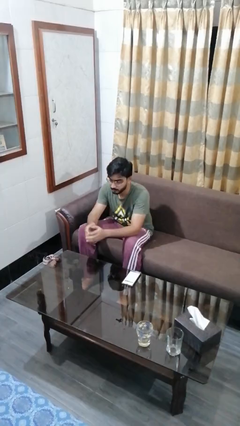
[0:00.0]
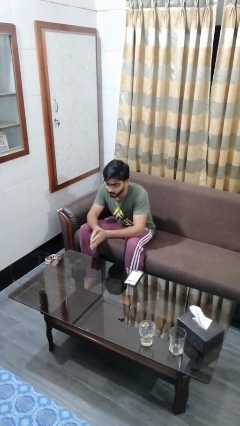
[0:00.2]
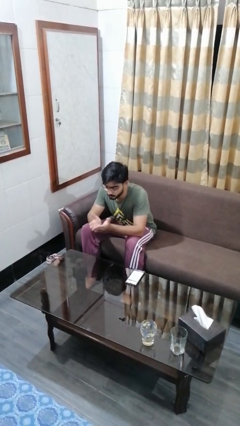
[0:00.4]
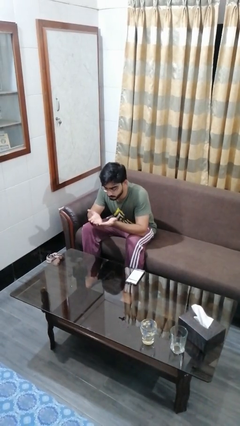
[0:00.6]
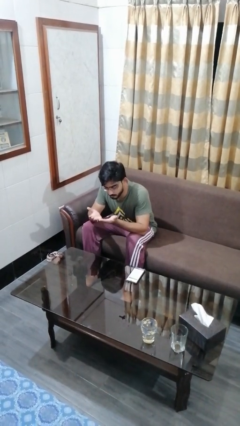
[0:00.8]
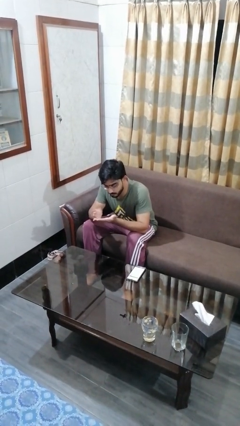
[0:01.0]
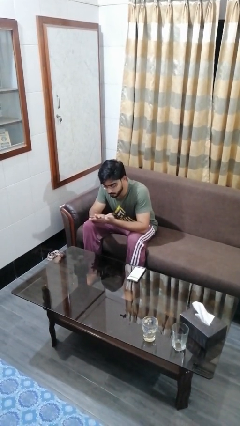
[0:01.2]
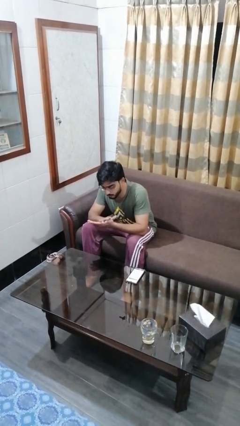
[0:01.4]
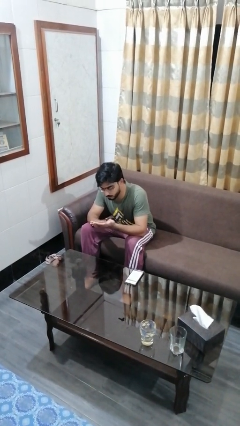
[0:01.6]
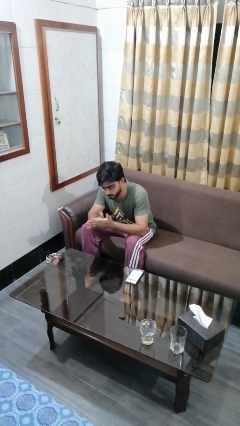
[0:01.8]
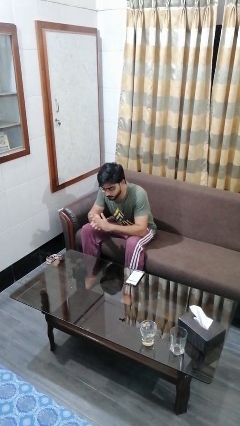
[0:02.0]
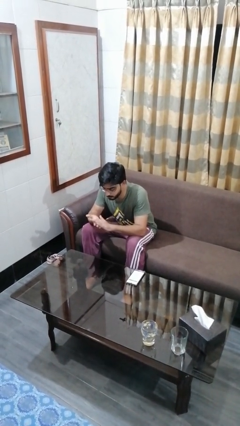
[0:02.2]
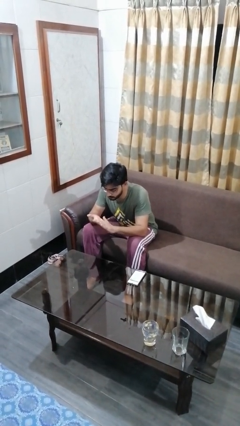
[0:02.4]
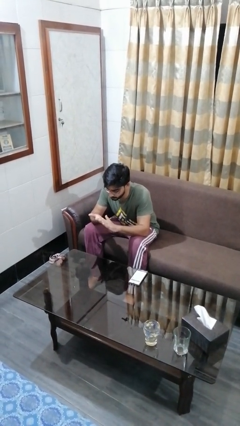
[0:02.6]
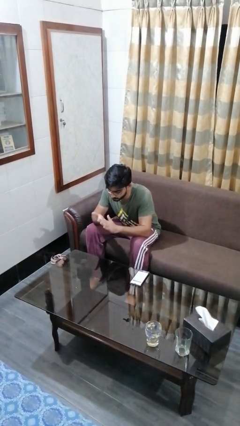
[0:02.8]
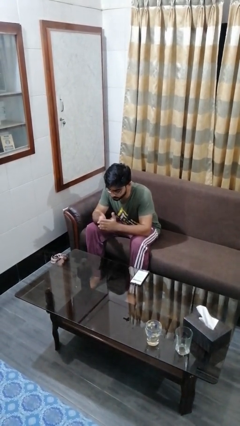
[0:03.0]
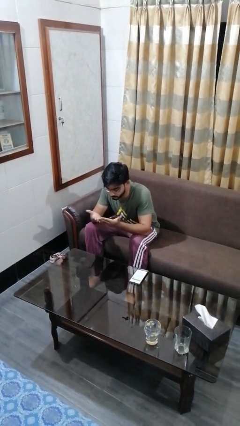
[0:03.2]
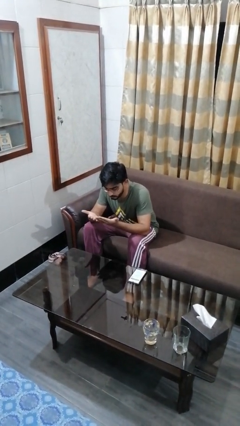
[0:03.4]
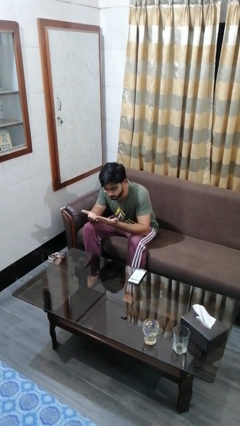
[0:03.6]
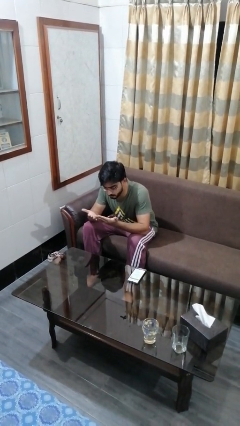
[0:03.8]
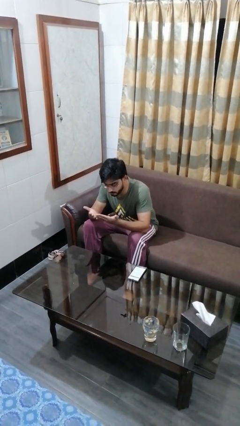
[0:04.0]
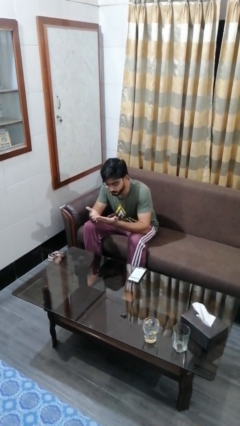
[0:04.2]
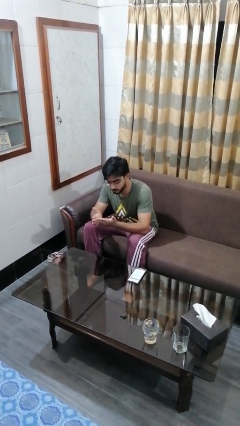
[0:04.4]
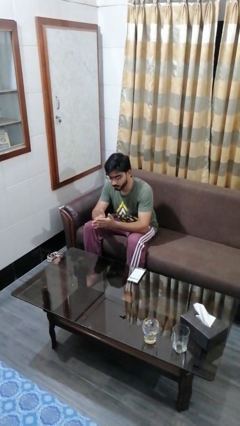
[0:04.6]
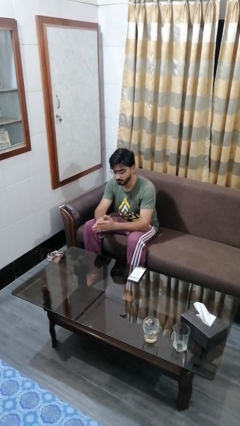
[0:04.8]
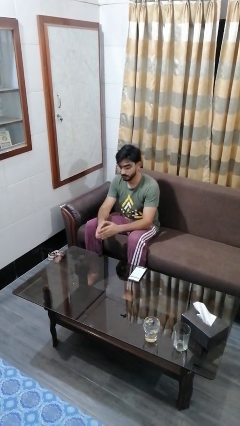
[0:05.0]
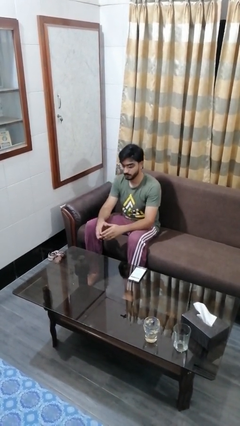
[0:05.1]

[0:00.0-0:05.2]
person looks at hands in lap

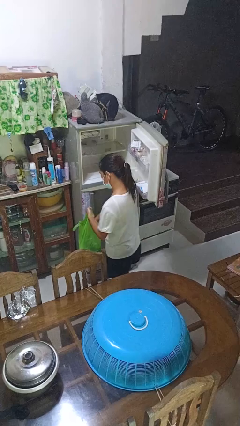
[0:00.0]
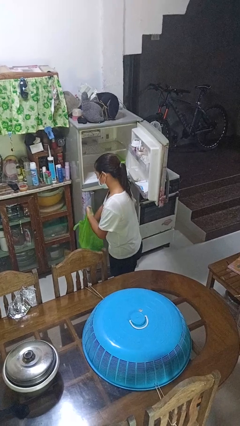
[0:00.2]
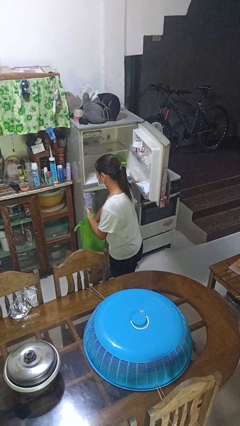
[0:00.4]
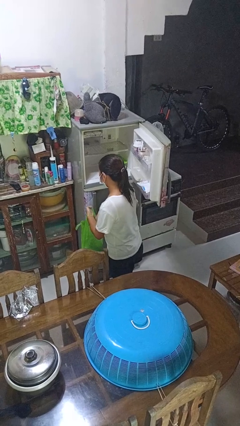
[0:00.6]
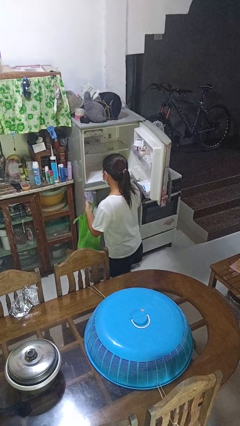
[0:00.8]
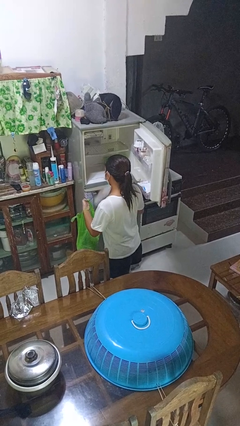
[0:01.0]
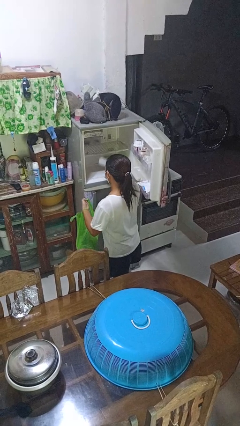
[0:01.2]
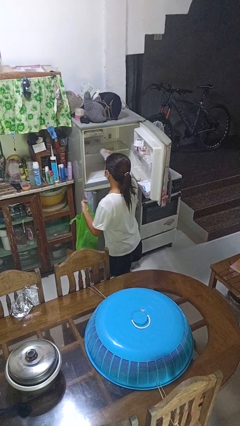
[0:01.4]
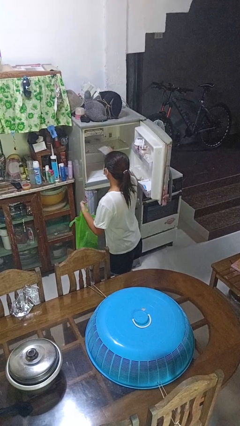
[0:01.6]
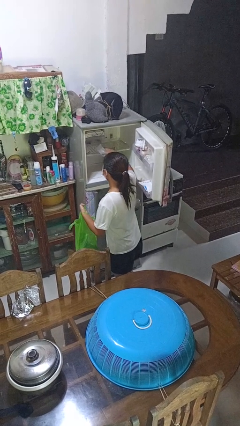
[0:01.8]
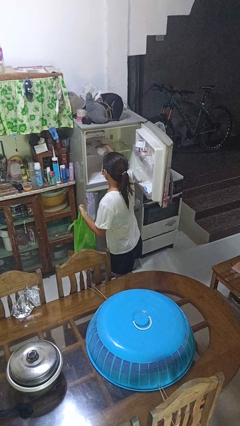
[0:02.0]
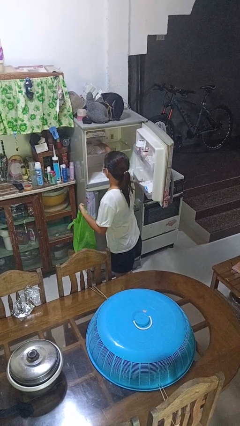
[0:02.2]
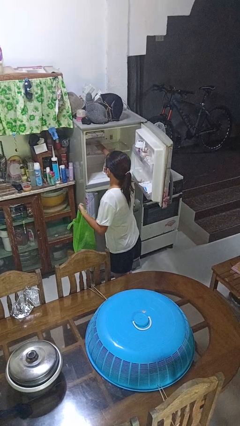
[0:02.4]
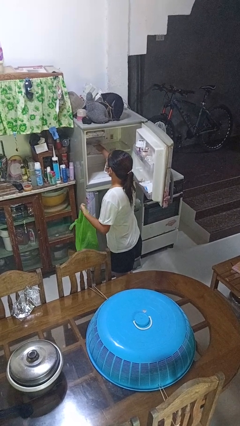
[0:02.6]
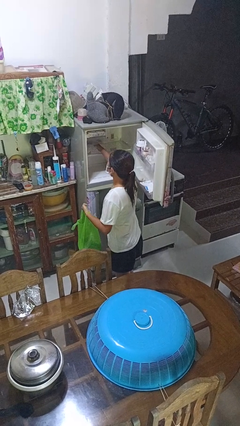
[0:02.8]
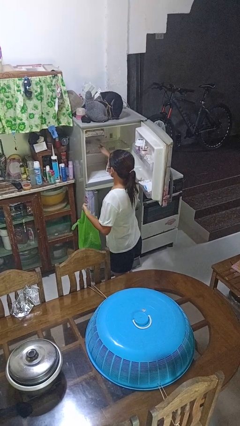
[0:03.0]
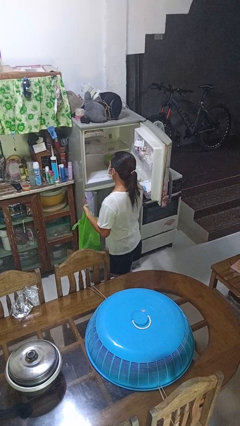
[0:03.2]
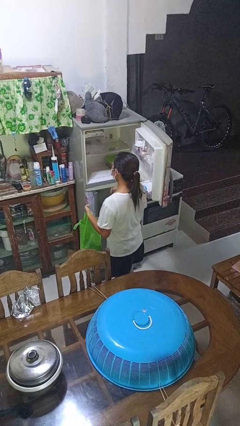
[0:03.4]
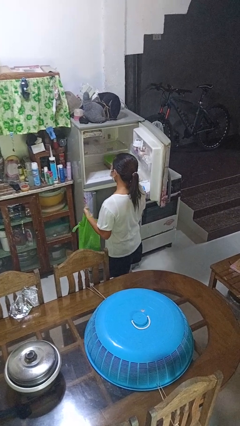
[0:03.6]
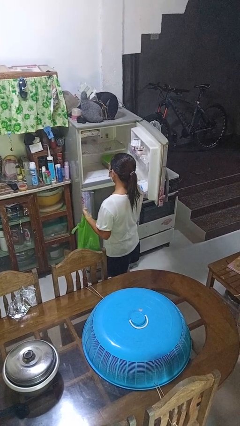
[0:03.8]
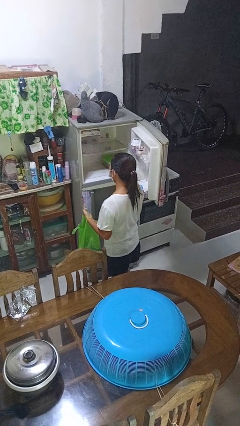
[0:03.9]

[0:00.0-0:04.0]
person loads groceries into refrigerator

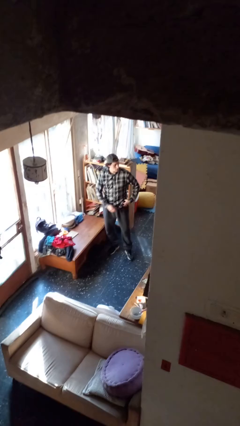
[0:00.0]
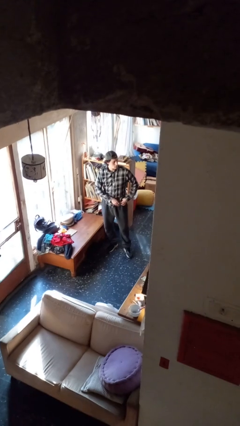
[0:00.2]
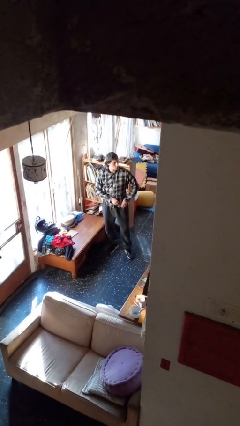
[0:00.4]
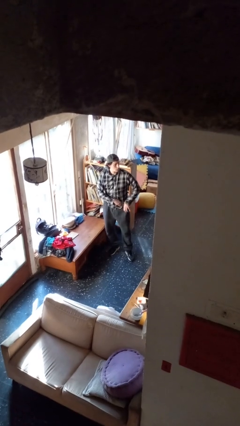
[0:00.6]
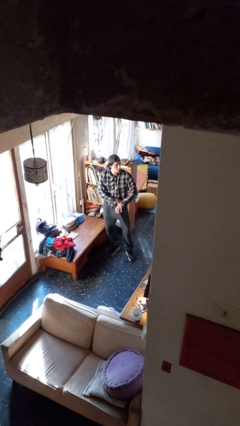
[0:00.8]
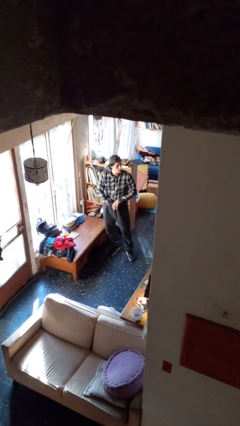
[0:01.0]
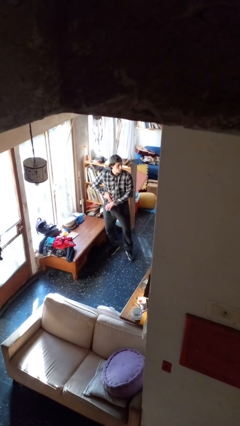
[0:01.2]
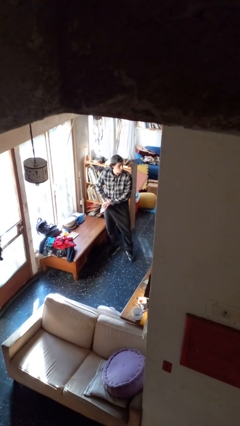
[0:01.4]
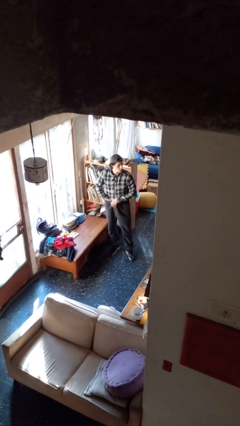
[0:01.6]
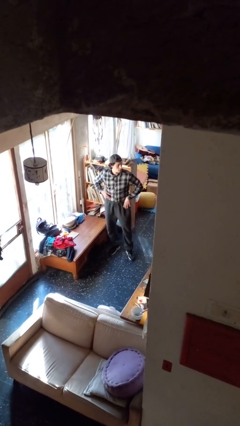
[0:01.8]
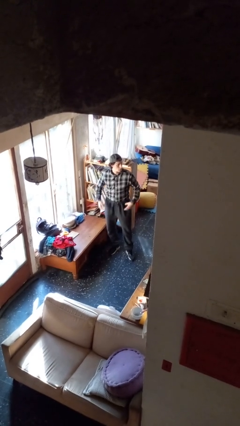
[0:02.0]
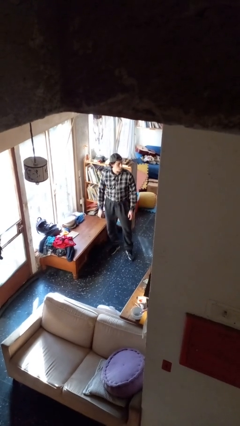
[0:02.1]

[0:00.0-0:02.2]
person tucks in shirt

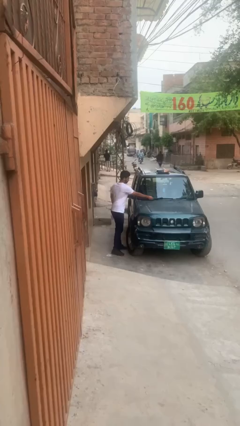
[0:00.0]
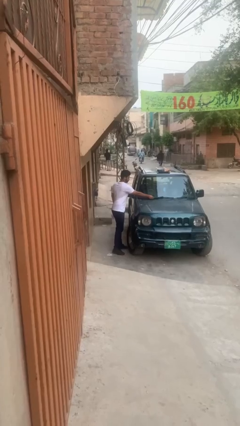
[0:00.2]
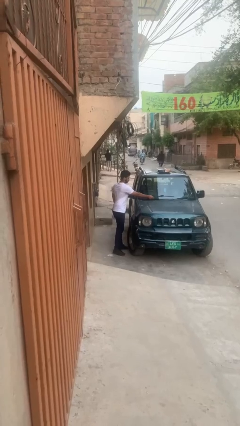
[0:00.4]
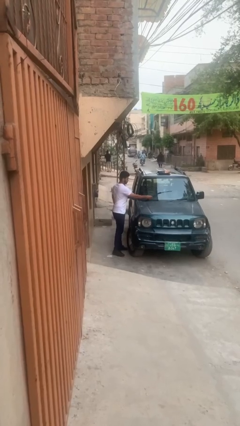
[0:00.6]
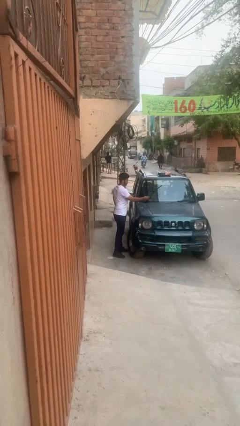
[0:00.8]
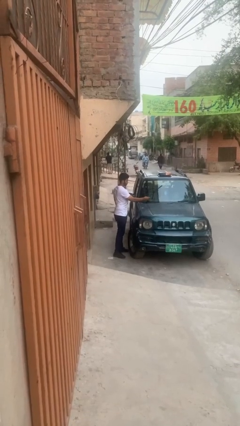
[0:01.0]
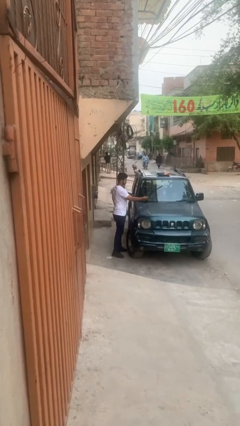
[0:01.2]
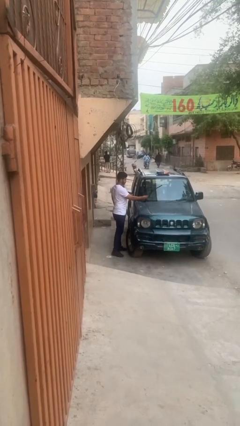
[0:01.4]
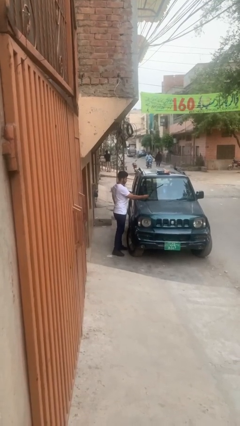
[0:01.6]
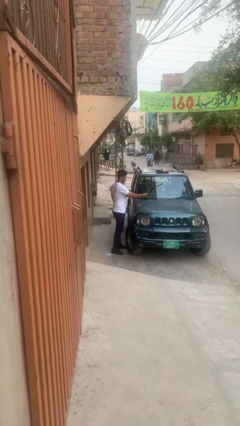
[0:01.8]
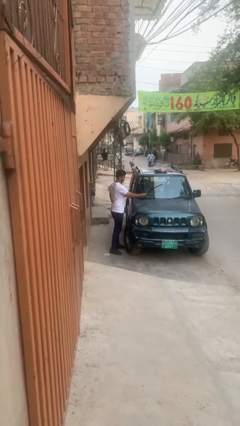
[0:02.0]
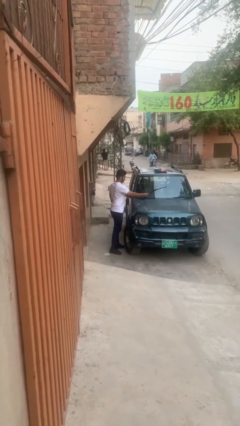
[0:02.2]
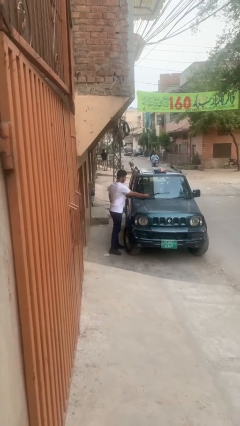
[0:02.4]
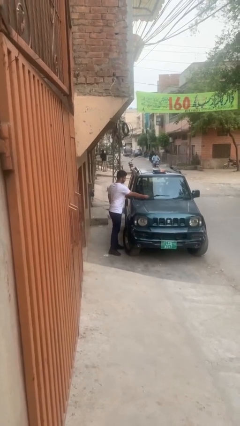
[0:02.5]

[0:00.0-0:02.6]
person flips up car wipers

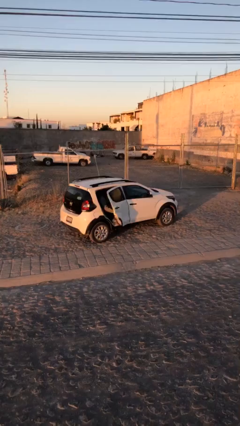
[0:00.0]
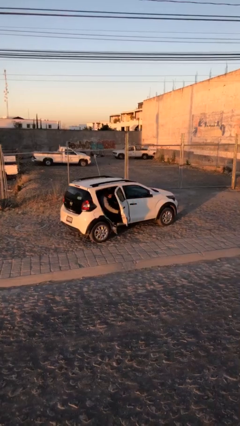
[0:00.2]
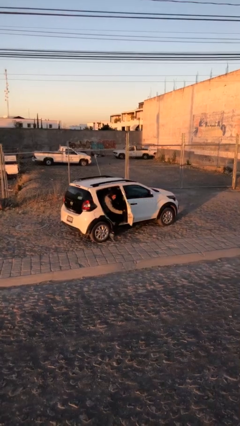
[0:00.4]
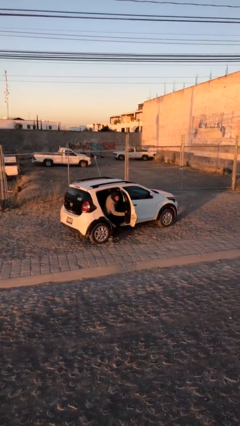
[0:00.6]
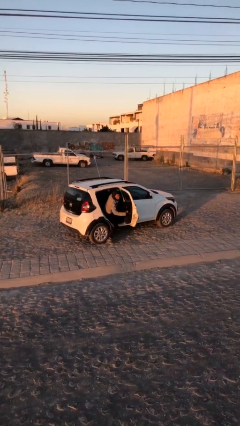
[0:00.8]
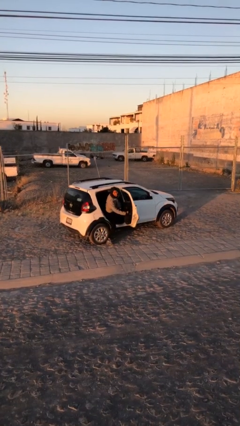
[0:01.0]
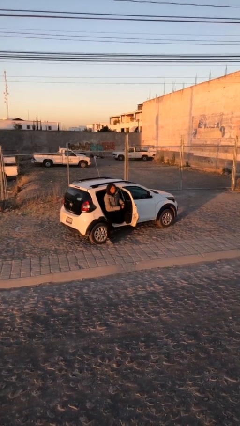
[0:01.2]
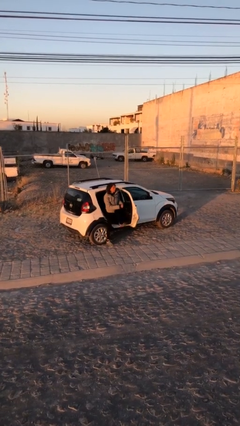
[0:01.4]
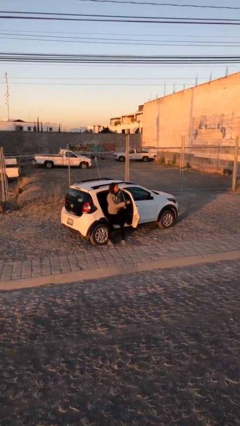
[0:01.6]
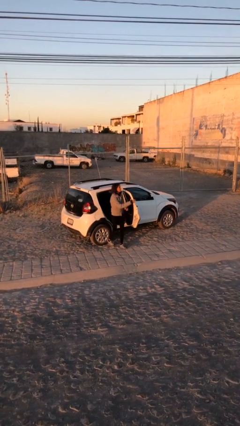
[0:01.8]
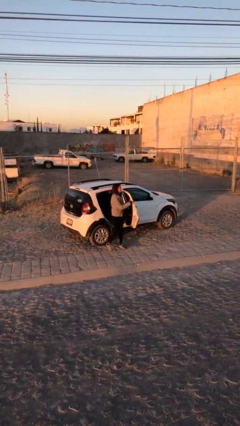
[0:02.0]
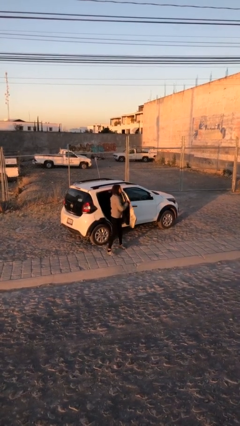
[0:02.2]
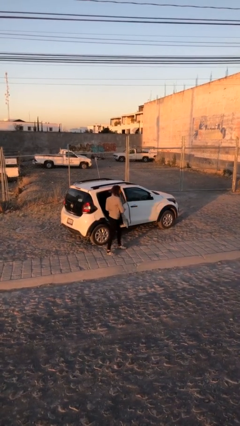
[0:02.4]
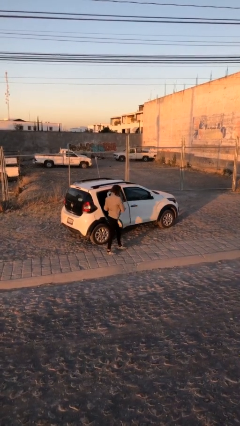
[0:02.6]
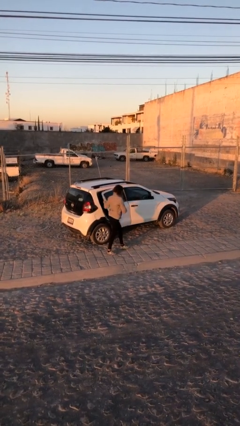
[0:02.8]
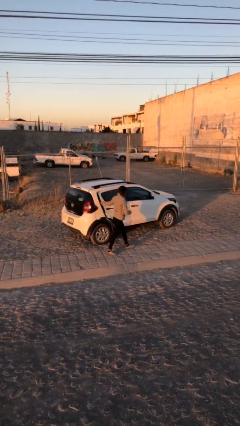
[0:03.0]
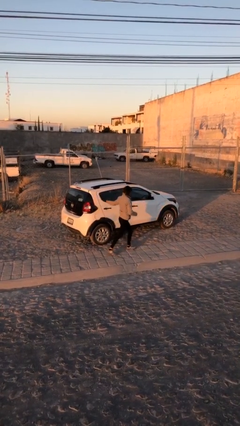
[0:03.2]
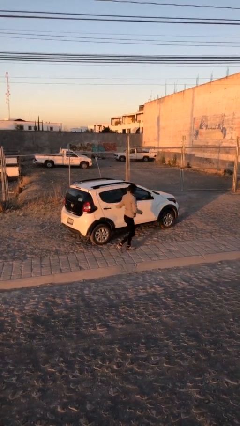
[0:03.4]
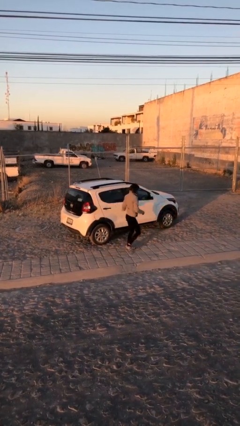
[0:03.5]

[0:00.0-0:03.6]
car drops off person
